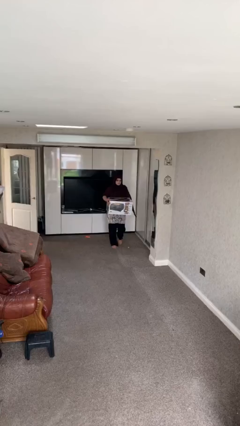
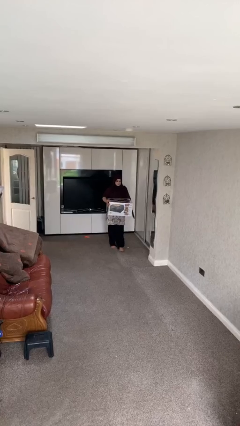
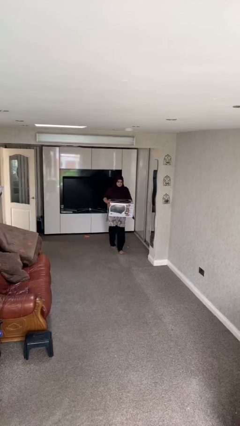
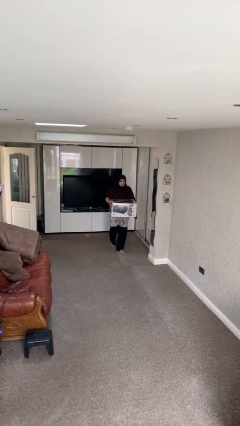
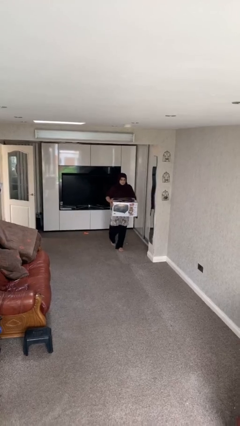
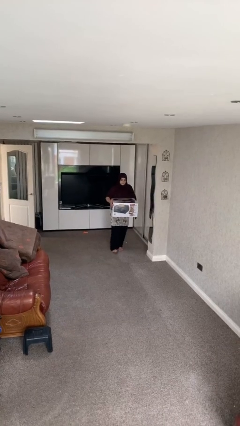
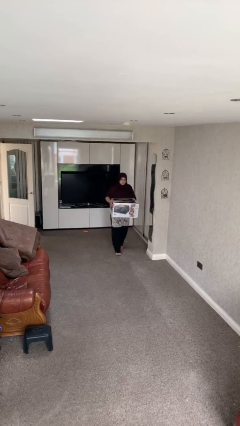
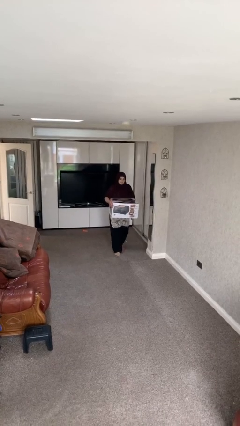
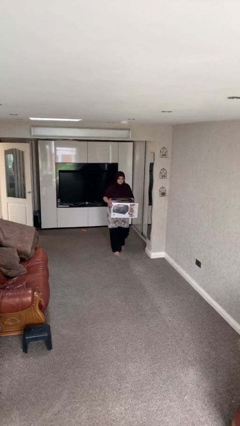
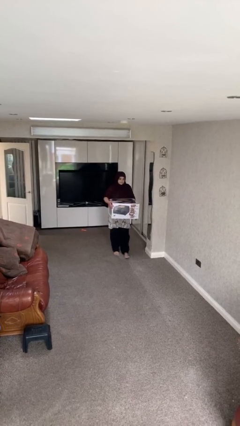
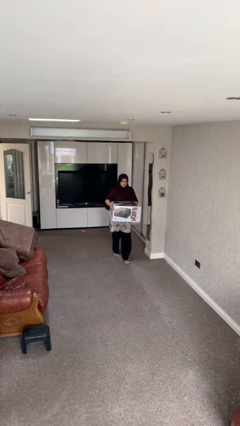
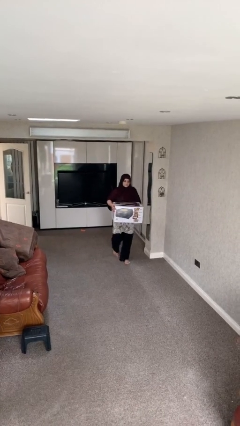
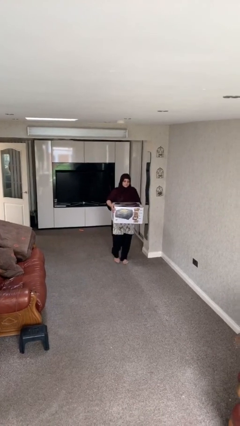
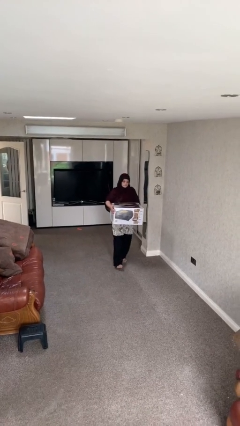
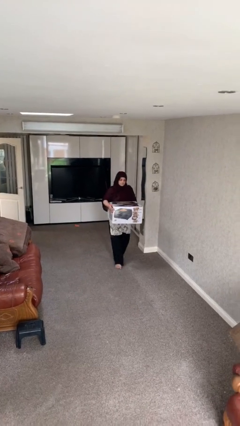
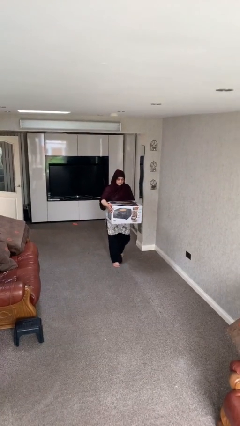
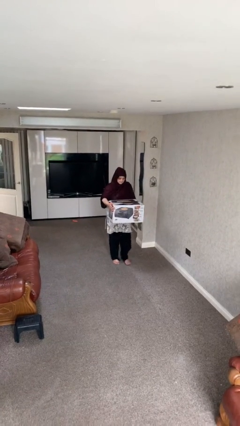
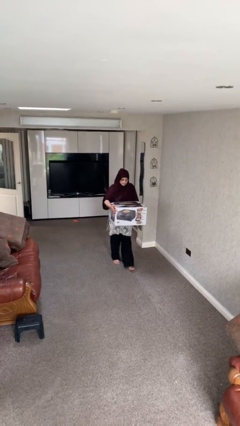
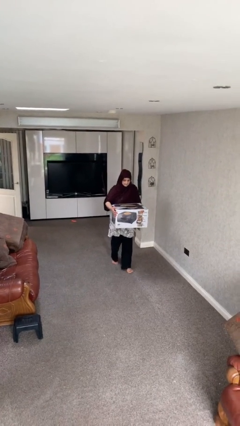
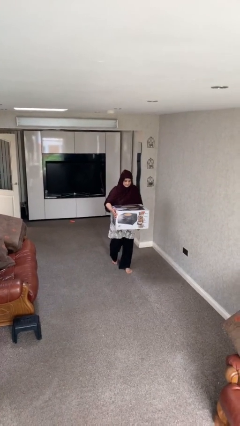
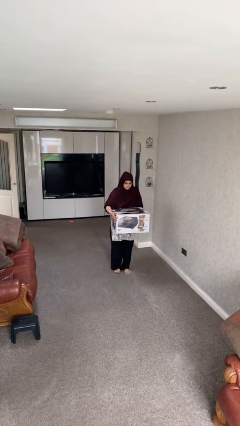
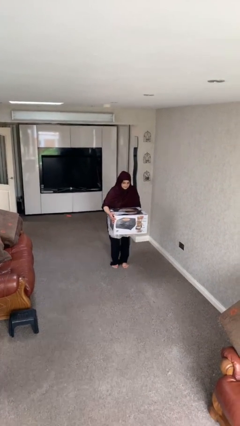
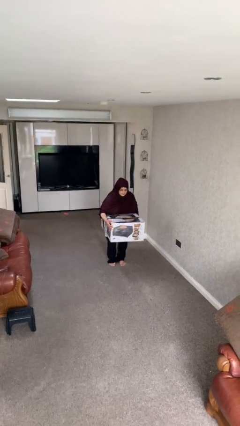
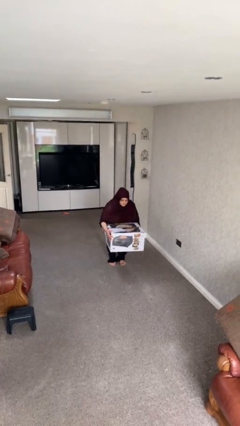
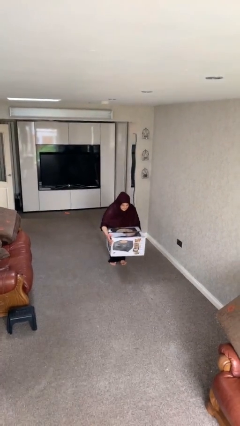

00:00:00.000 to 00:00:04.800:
person carries heavy object

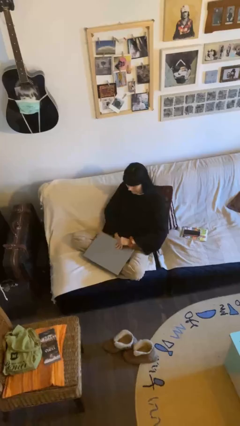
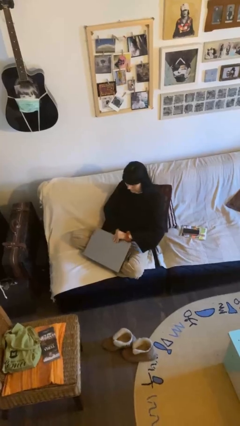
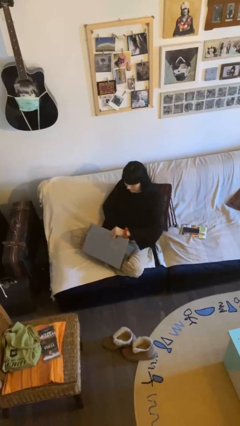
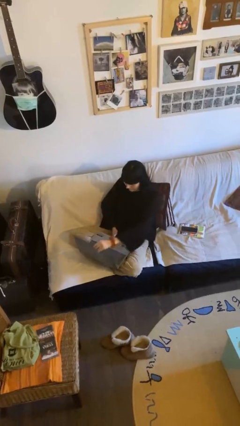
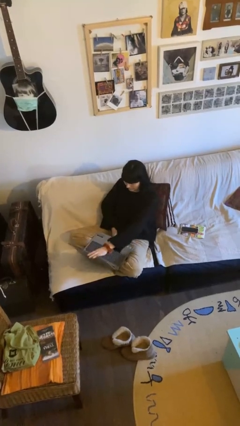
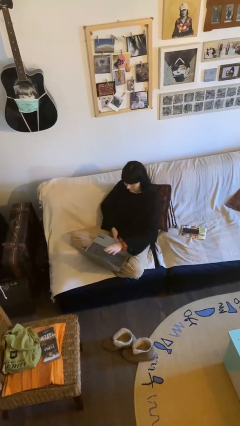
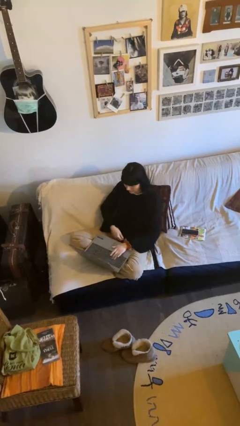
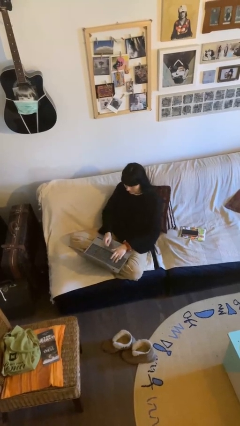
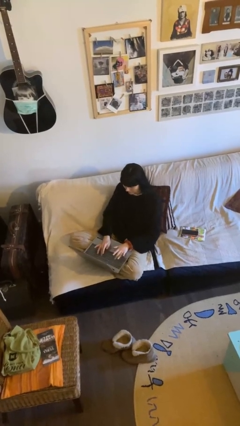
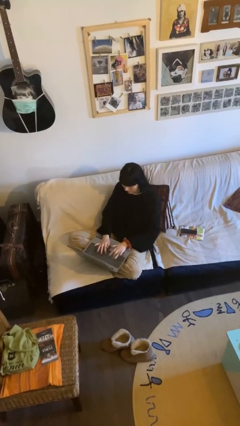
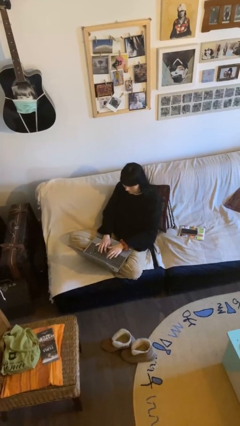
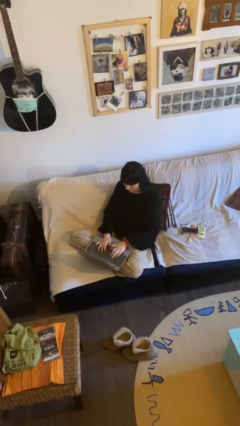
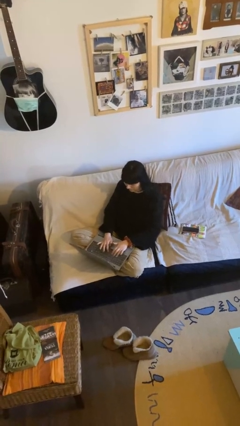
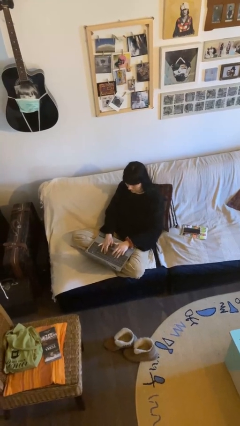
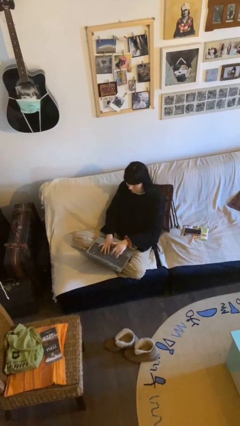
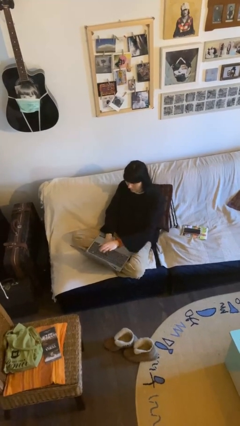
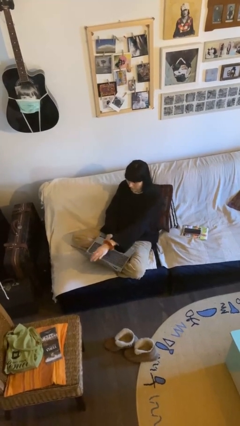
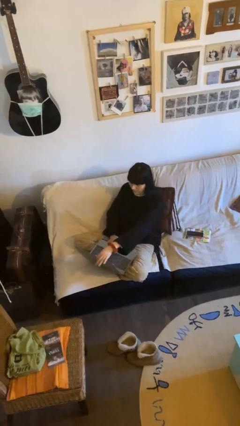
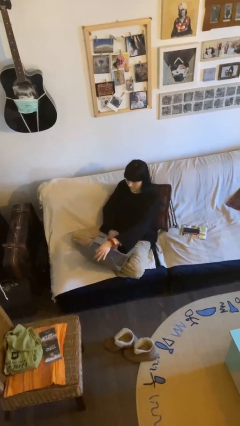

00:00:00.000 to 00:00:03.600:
person interacts with laptop

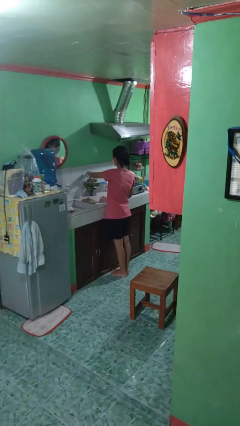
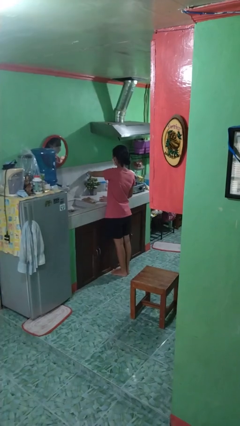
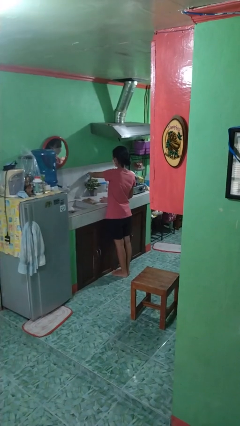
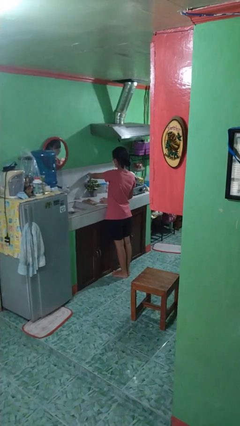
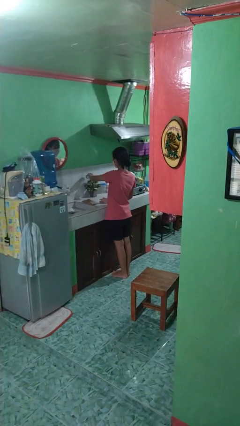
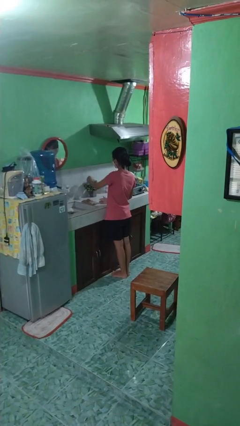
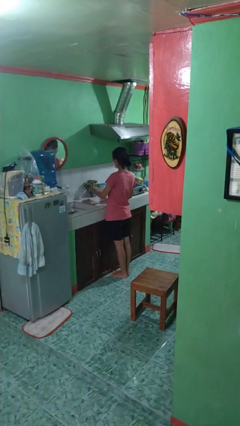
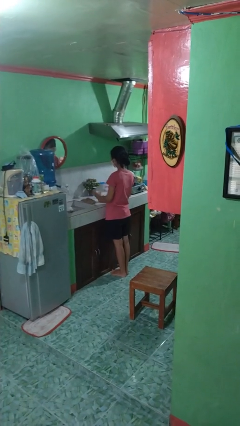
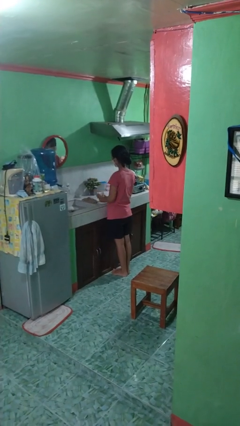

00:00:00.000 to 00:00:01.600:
person waters houseplant

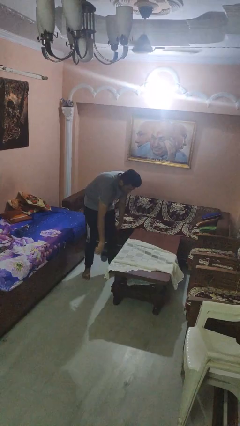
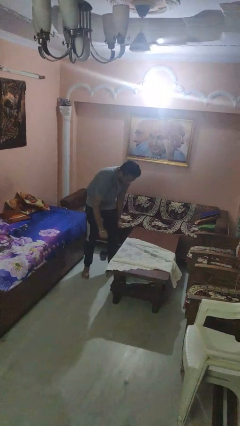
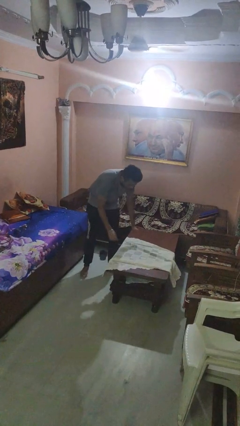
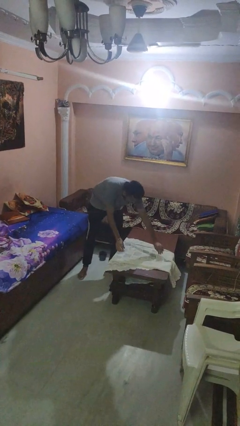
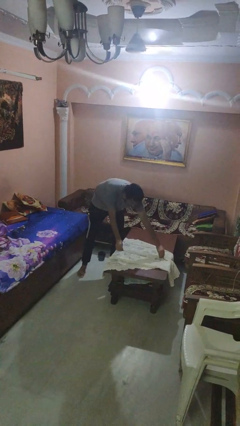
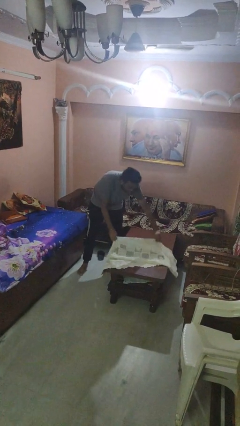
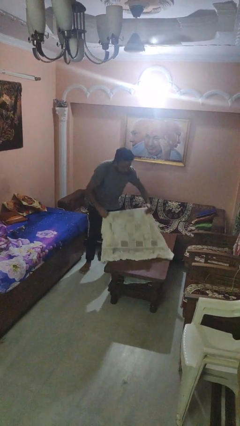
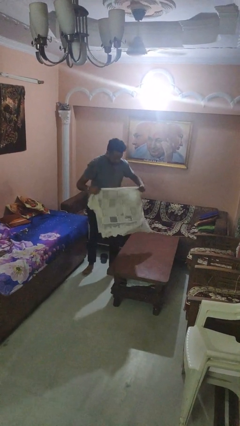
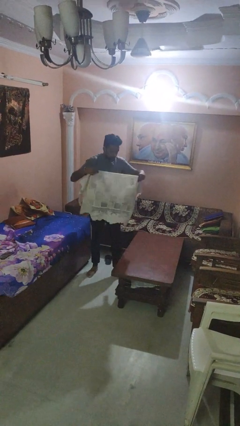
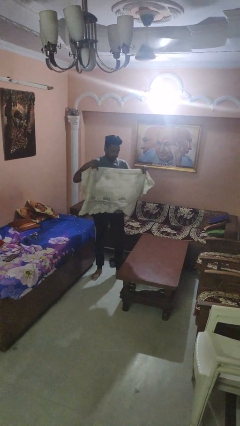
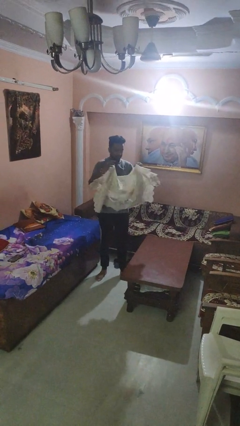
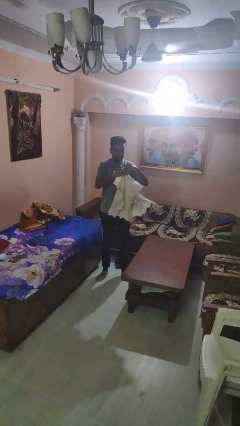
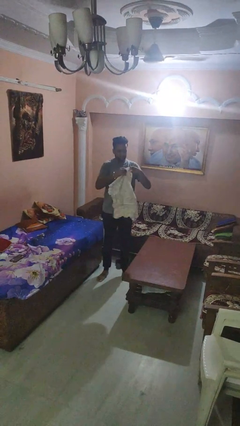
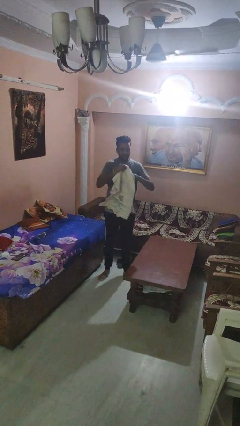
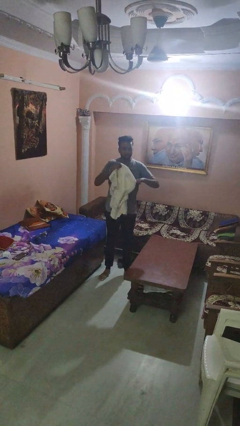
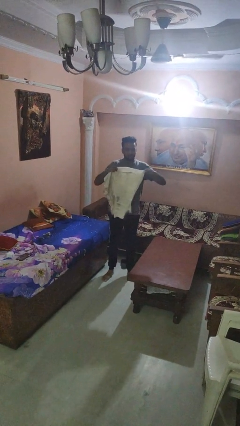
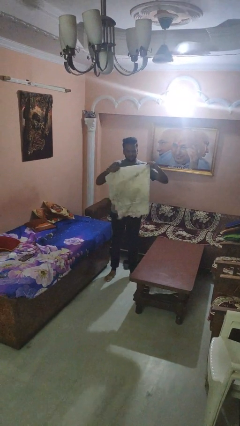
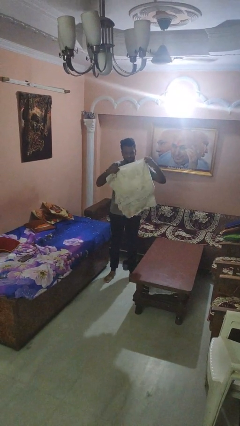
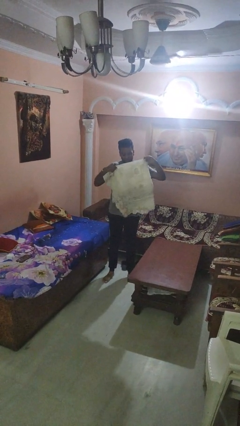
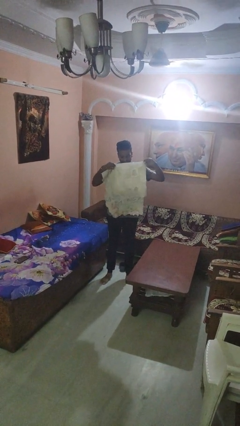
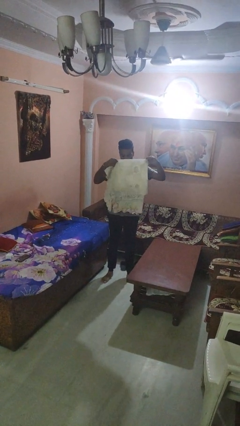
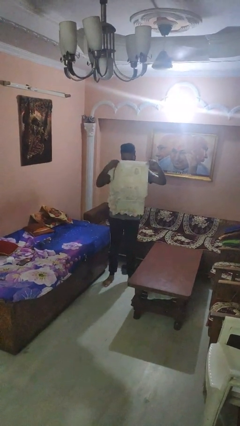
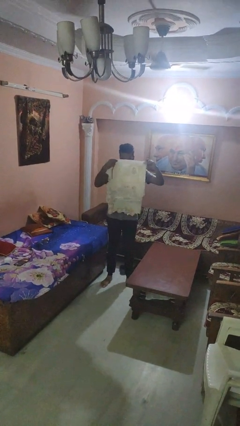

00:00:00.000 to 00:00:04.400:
person folds tablecloth

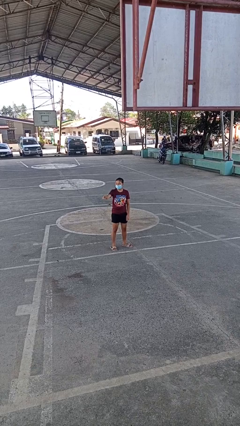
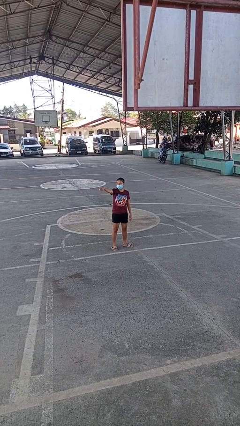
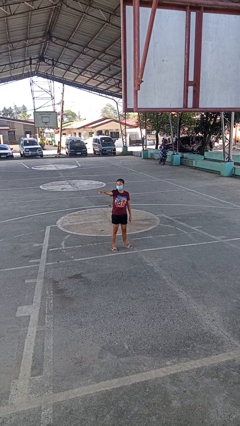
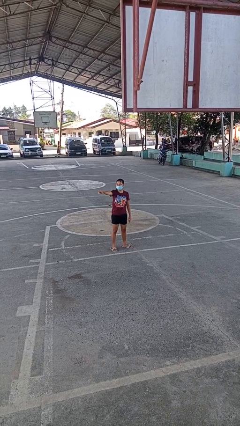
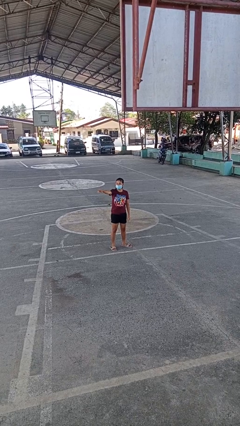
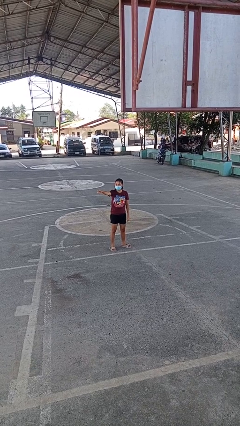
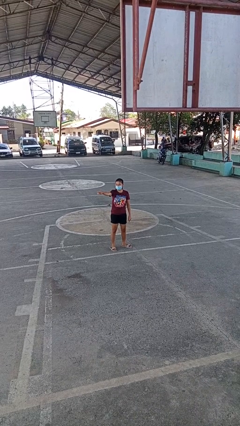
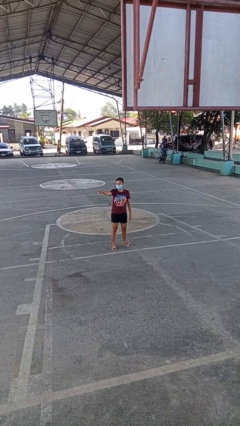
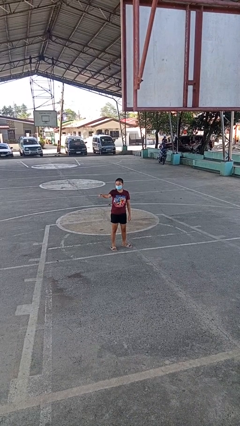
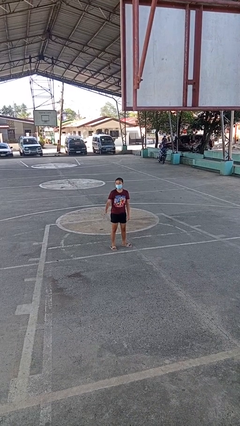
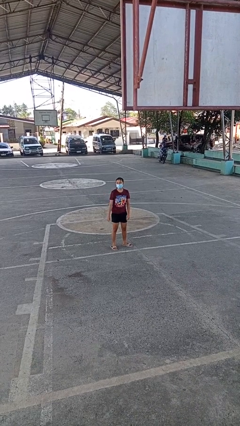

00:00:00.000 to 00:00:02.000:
person points at person

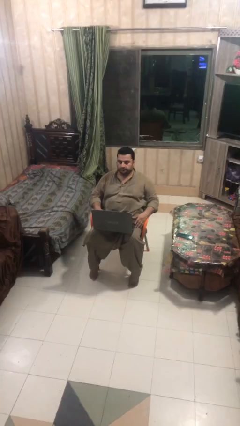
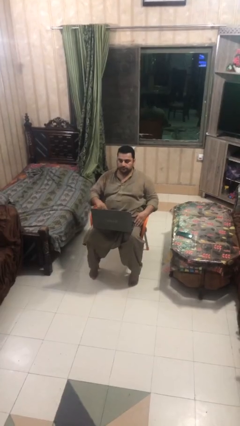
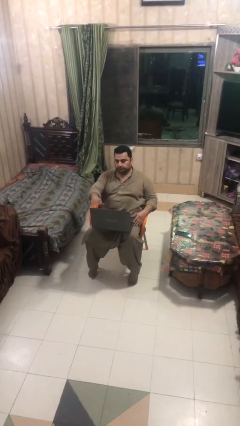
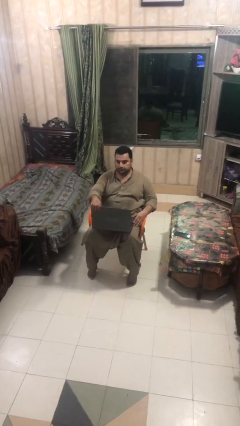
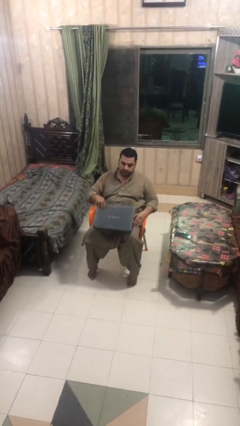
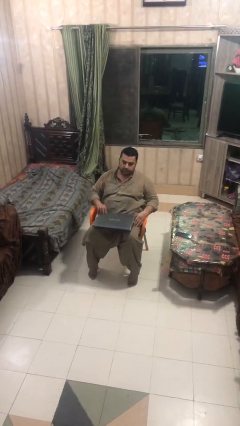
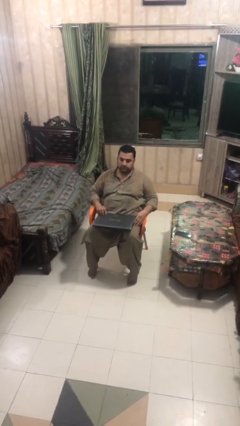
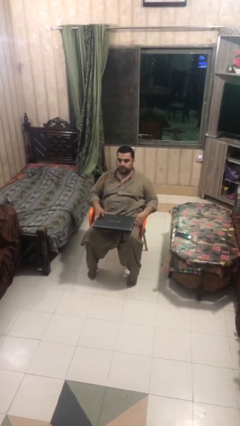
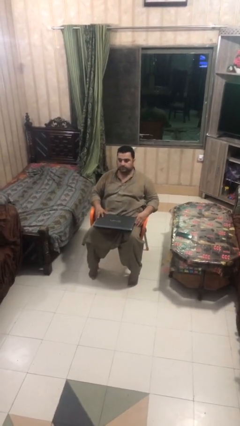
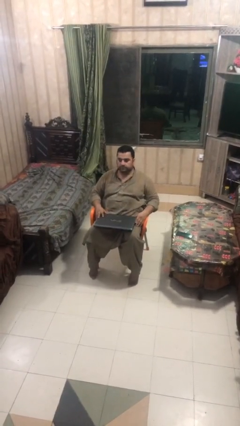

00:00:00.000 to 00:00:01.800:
person closes laptop
